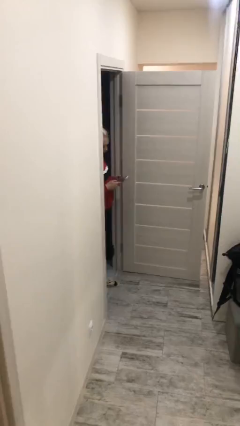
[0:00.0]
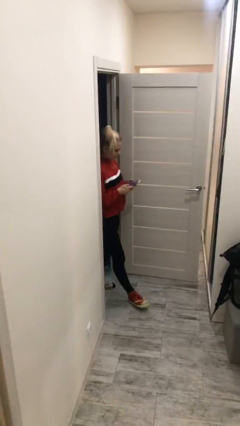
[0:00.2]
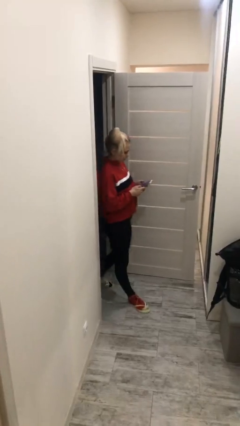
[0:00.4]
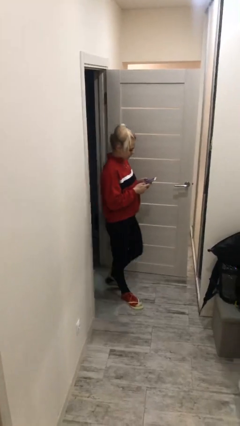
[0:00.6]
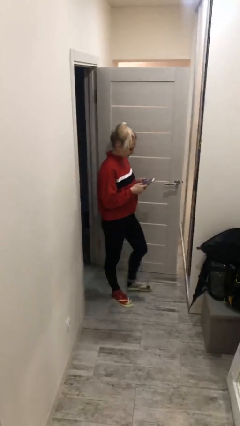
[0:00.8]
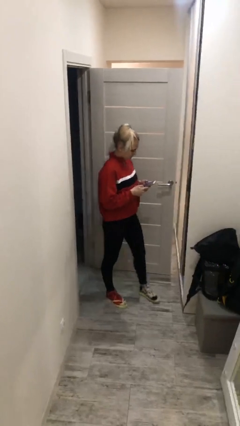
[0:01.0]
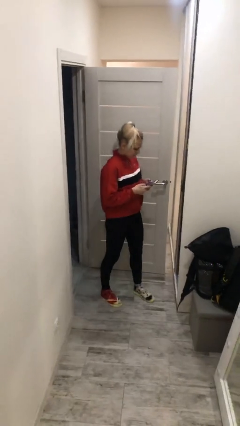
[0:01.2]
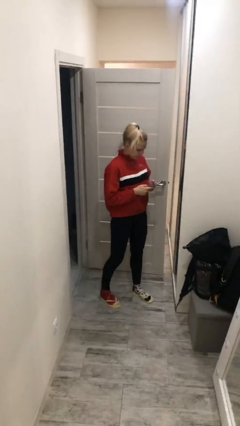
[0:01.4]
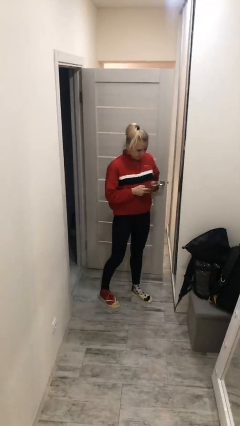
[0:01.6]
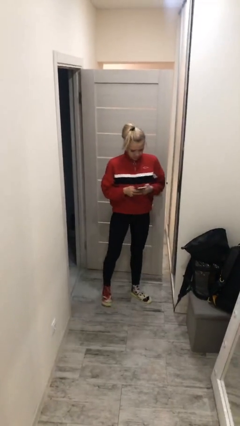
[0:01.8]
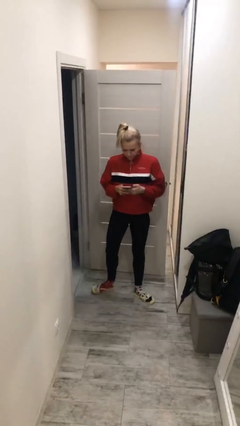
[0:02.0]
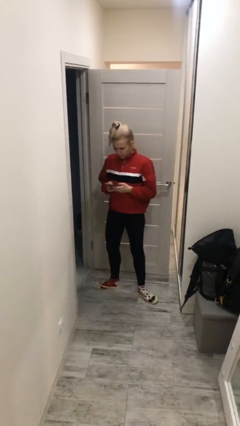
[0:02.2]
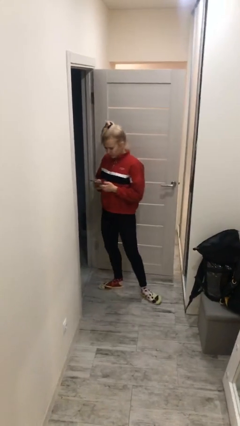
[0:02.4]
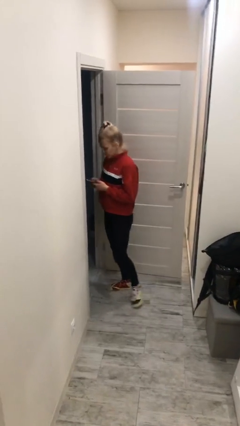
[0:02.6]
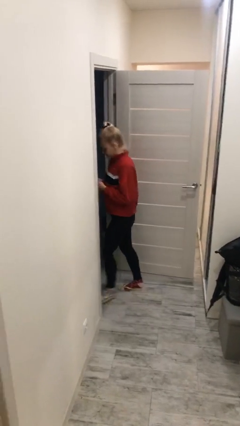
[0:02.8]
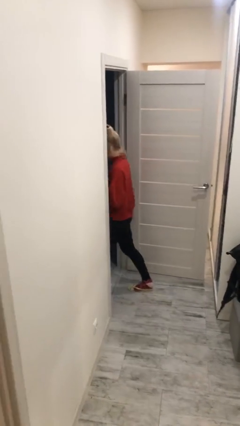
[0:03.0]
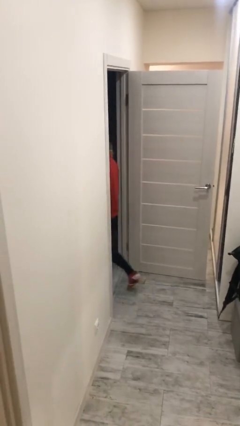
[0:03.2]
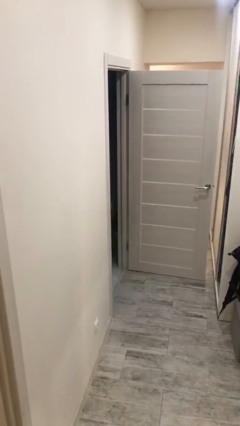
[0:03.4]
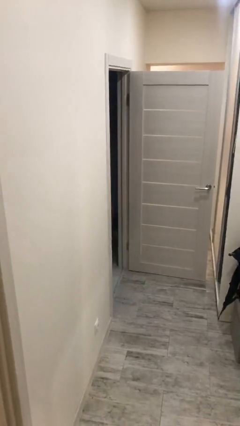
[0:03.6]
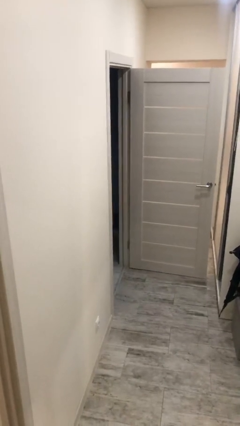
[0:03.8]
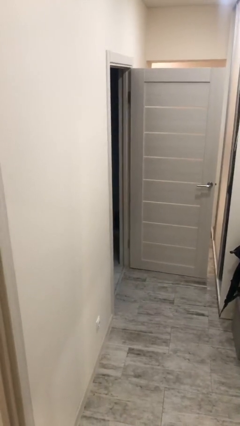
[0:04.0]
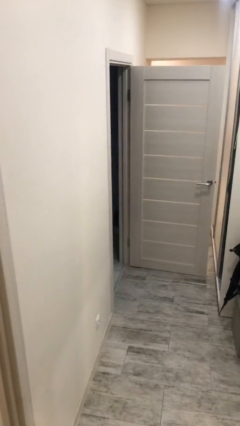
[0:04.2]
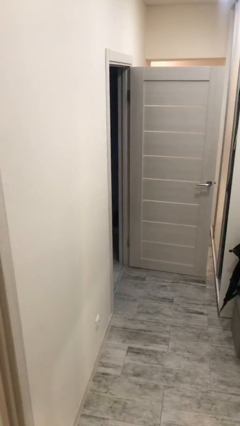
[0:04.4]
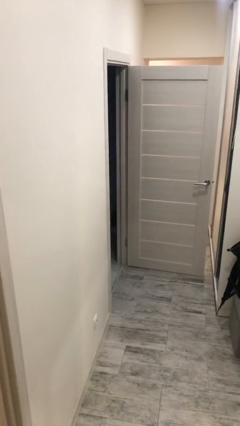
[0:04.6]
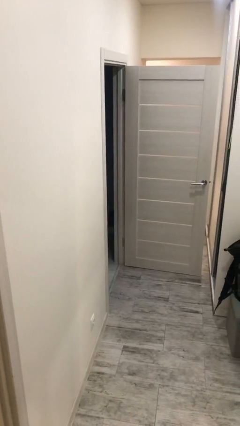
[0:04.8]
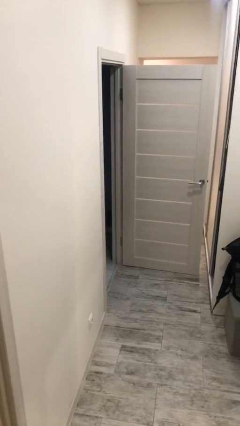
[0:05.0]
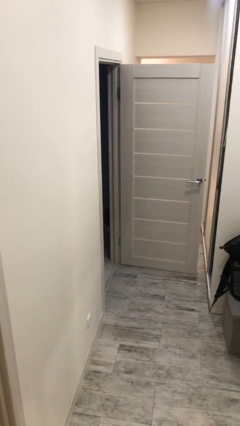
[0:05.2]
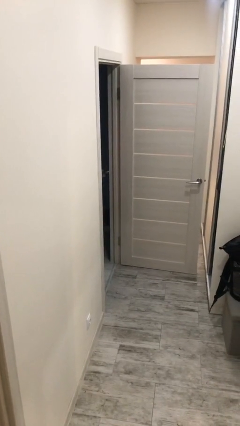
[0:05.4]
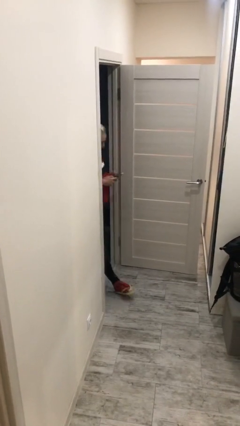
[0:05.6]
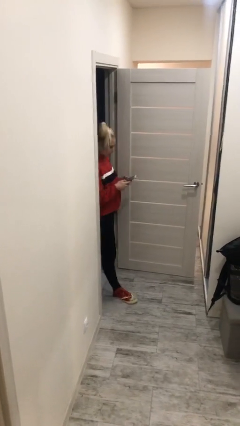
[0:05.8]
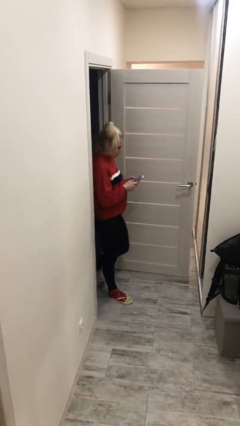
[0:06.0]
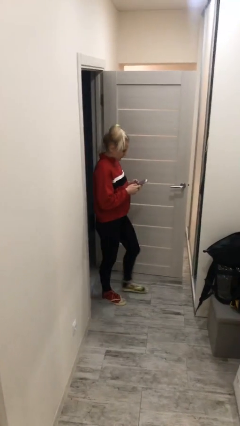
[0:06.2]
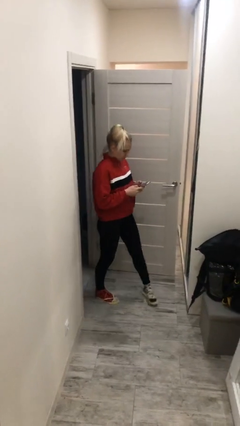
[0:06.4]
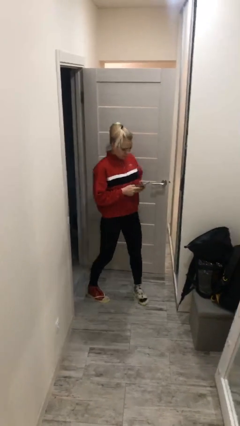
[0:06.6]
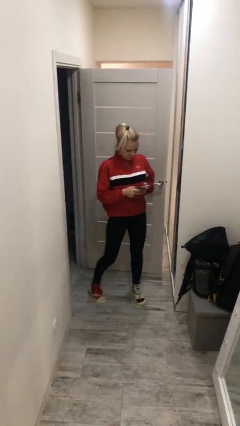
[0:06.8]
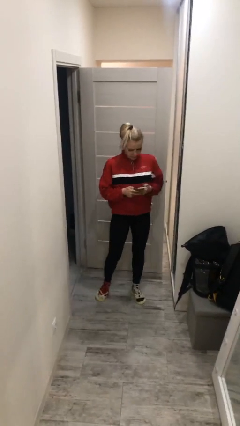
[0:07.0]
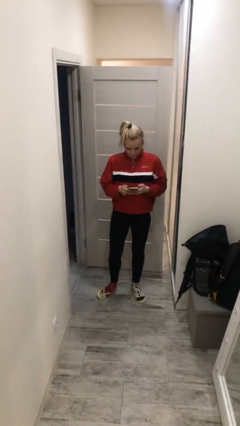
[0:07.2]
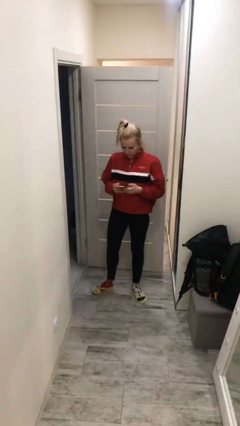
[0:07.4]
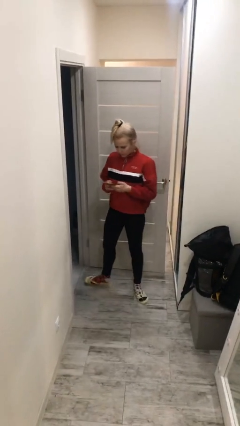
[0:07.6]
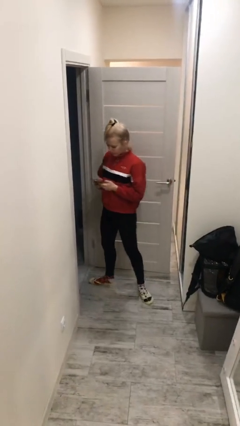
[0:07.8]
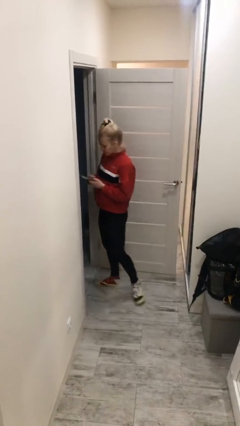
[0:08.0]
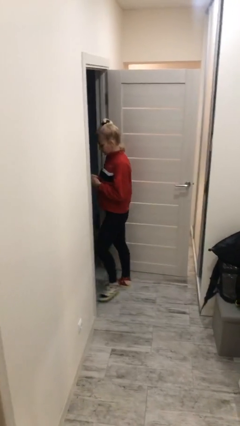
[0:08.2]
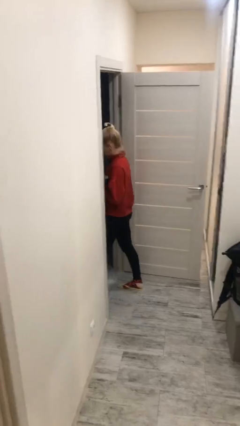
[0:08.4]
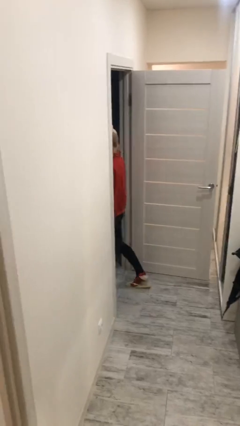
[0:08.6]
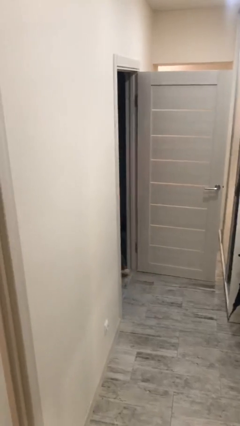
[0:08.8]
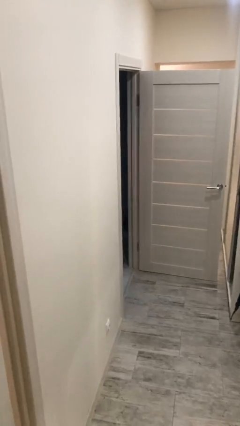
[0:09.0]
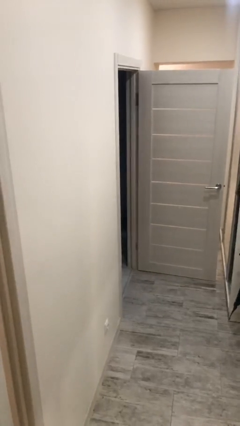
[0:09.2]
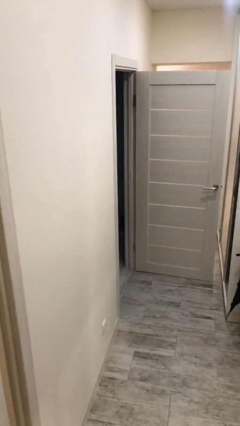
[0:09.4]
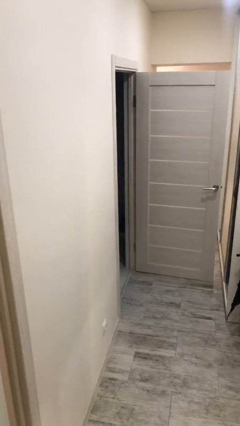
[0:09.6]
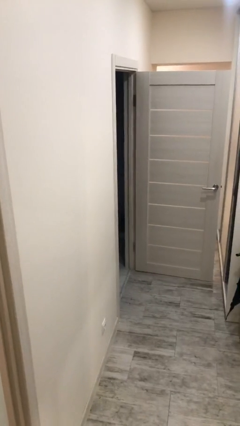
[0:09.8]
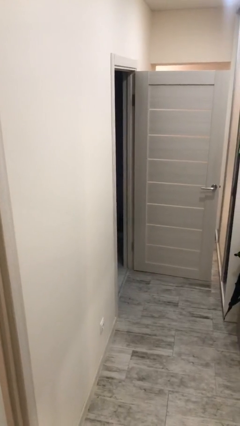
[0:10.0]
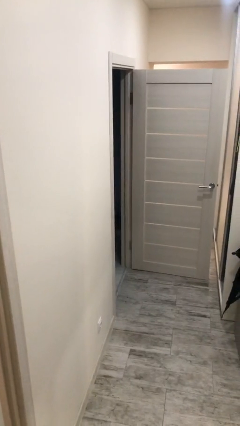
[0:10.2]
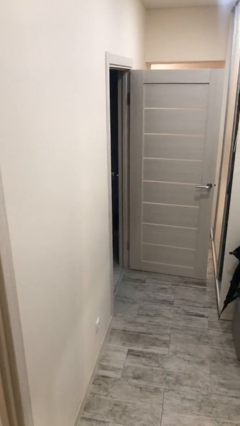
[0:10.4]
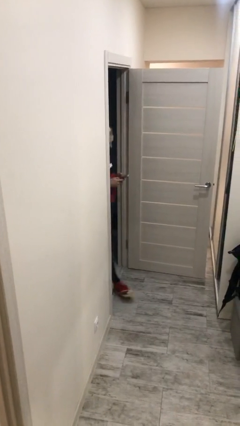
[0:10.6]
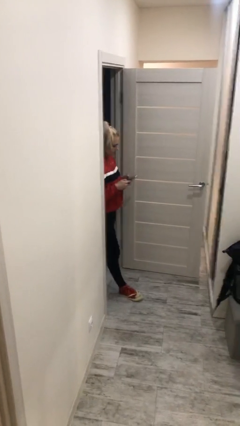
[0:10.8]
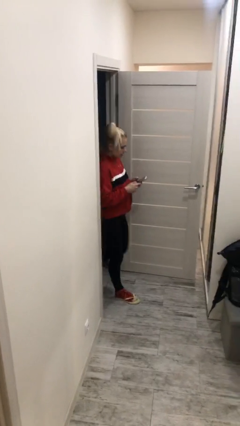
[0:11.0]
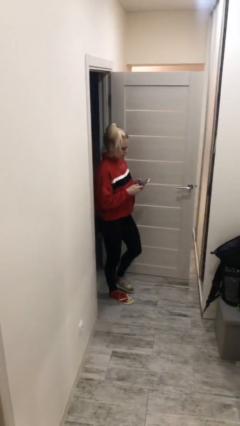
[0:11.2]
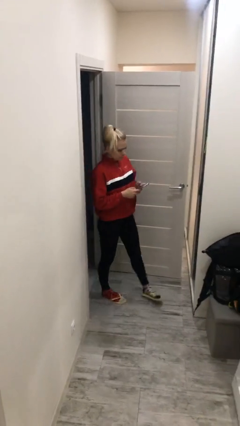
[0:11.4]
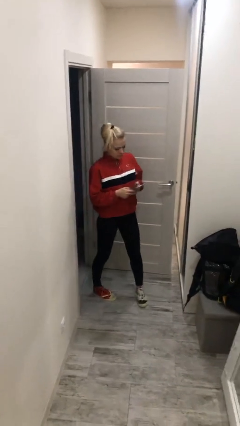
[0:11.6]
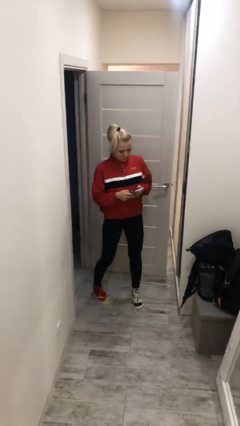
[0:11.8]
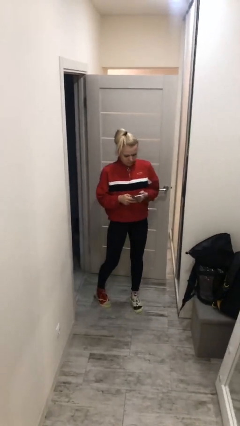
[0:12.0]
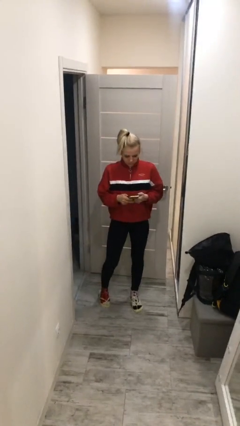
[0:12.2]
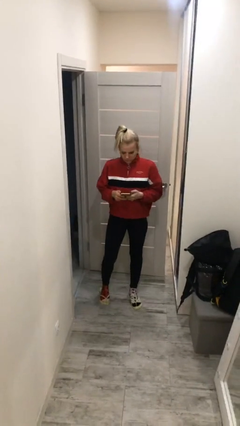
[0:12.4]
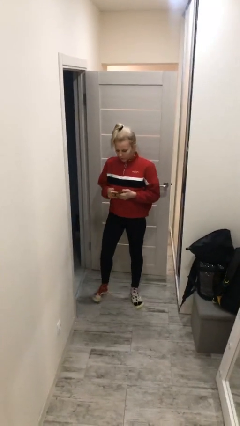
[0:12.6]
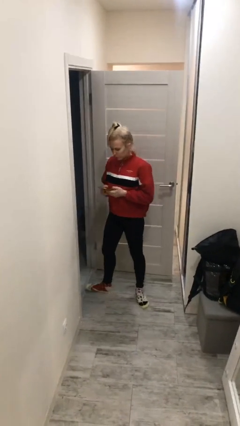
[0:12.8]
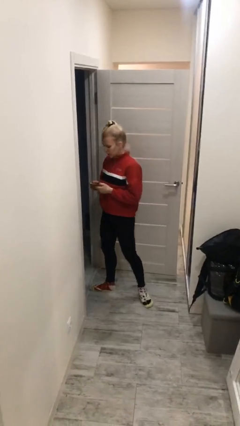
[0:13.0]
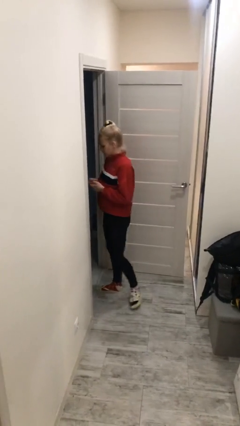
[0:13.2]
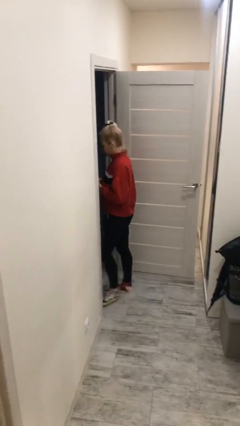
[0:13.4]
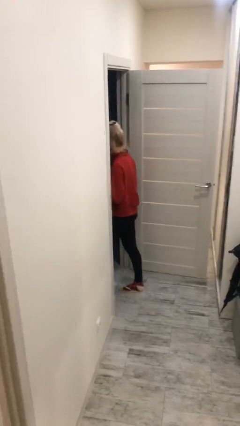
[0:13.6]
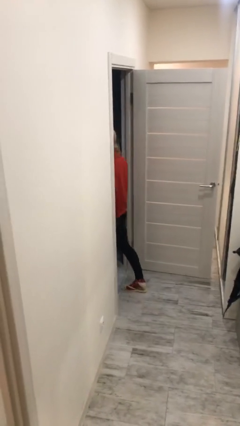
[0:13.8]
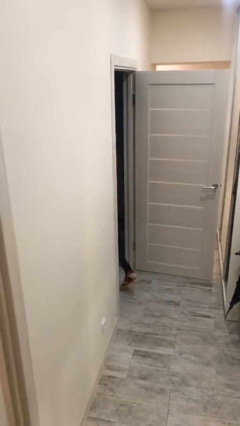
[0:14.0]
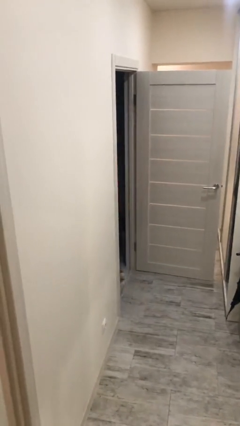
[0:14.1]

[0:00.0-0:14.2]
person texts on phone

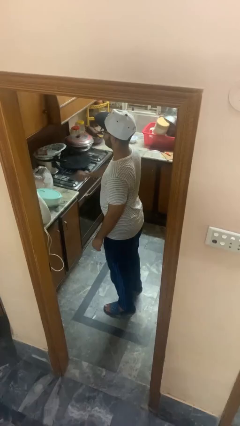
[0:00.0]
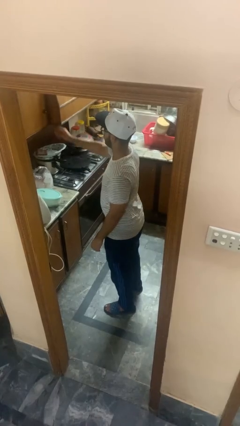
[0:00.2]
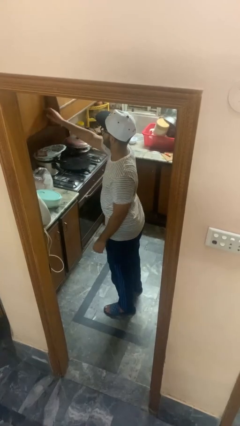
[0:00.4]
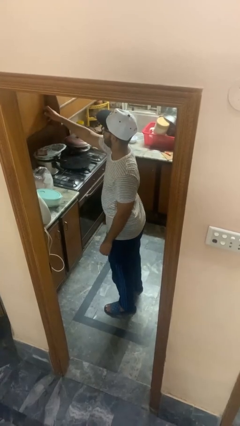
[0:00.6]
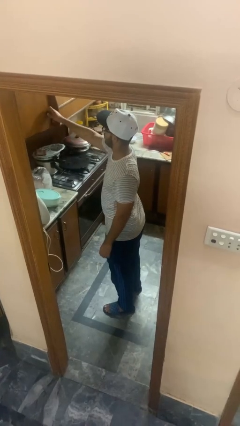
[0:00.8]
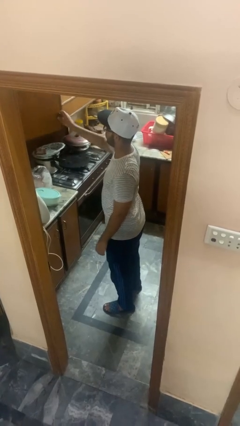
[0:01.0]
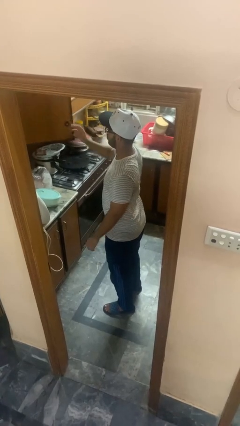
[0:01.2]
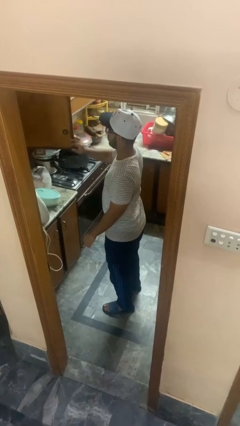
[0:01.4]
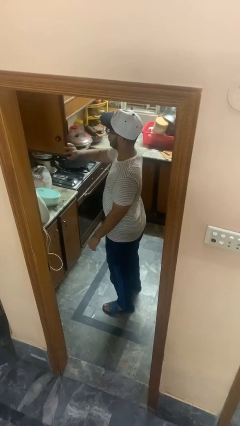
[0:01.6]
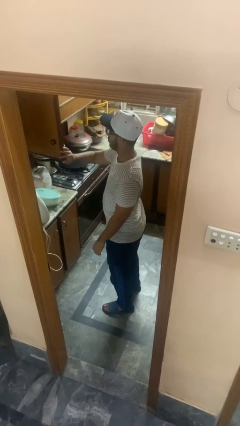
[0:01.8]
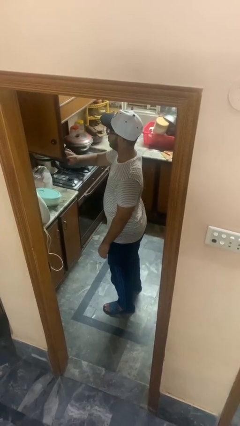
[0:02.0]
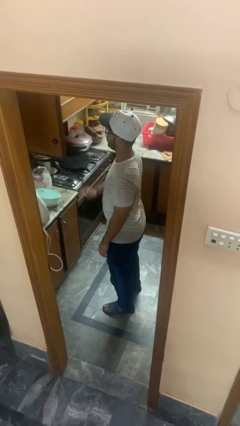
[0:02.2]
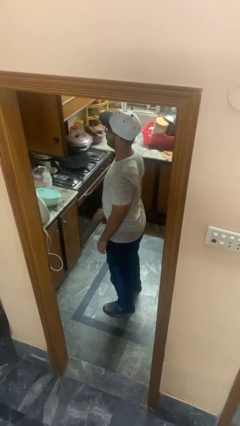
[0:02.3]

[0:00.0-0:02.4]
person opens kitchen drawer

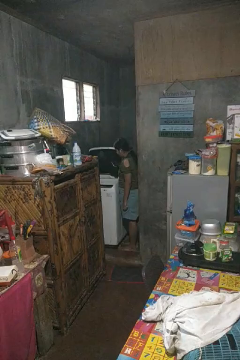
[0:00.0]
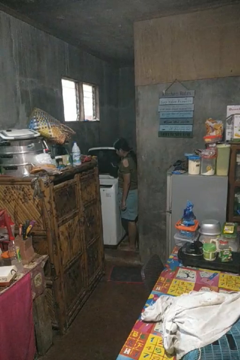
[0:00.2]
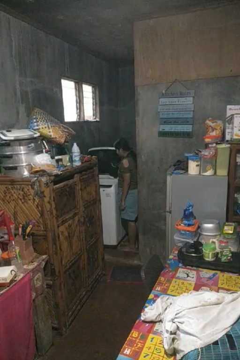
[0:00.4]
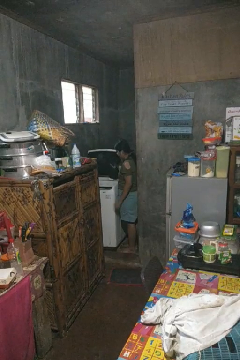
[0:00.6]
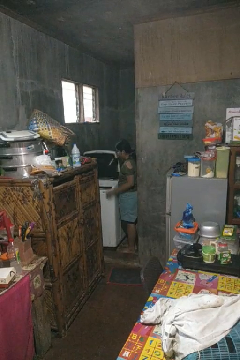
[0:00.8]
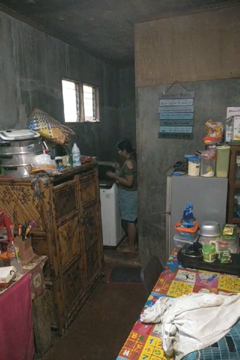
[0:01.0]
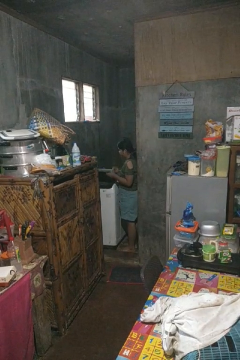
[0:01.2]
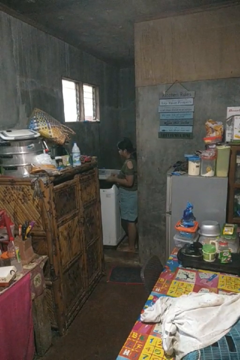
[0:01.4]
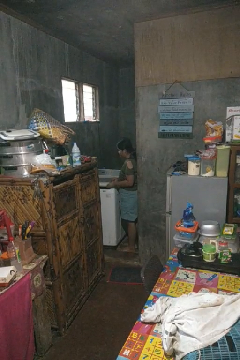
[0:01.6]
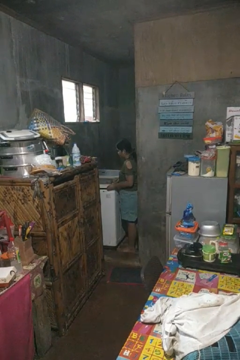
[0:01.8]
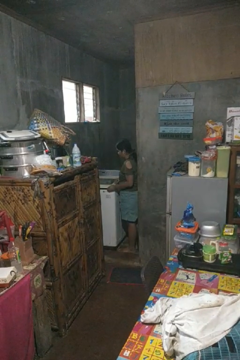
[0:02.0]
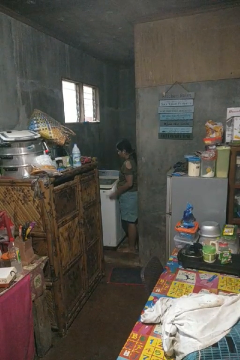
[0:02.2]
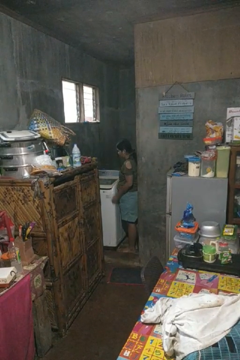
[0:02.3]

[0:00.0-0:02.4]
person closes clothes washer
